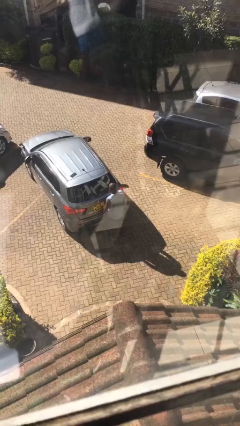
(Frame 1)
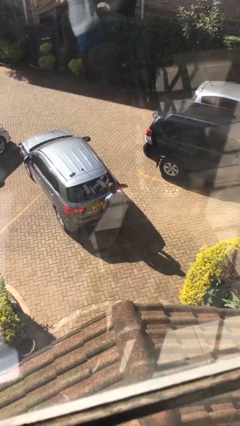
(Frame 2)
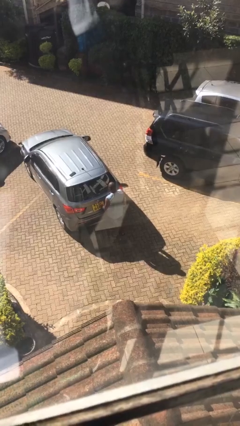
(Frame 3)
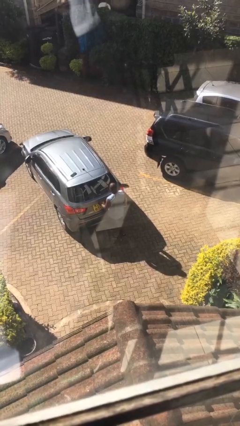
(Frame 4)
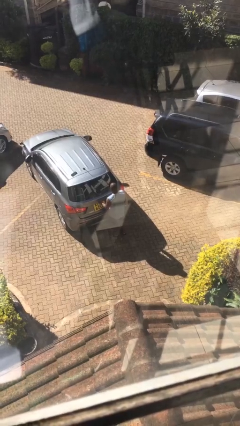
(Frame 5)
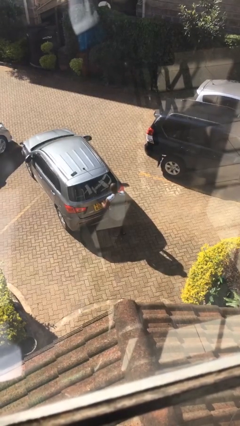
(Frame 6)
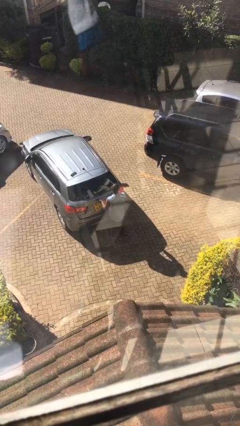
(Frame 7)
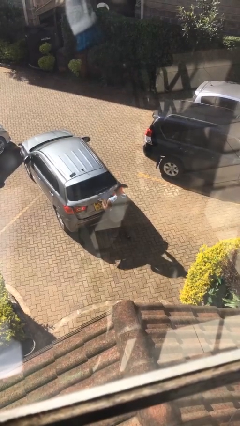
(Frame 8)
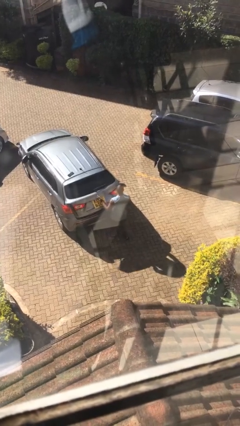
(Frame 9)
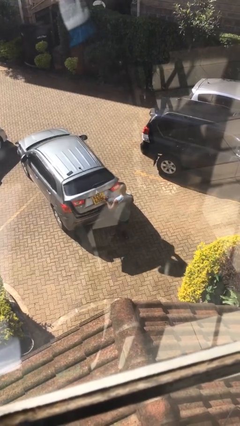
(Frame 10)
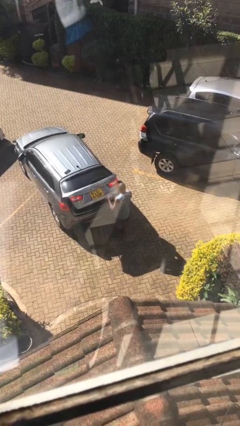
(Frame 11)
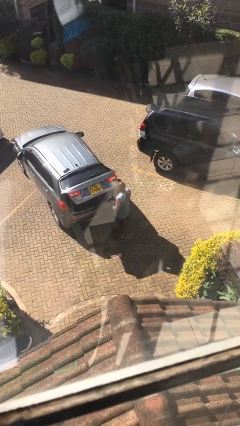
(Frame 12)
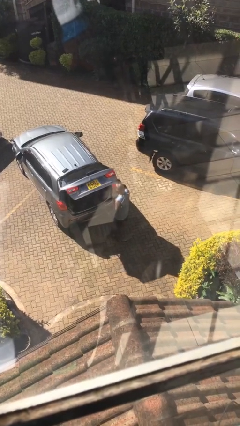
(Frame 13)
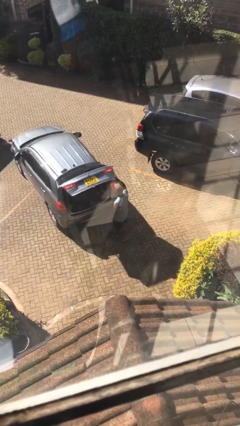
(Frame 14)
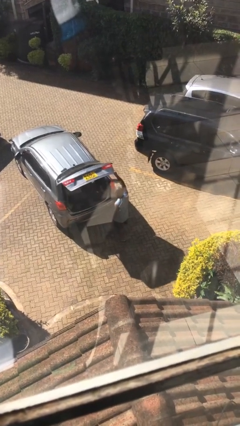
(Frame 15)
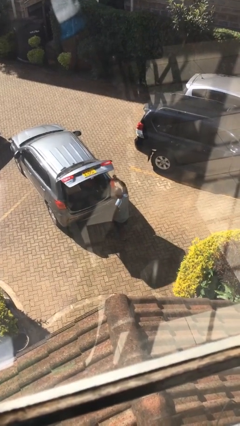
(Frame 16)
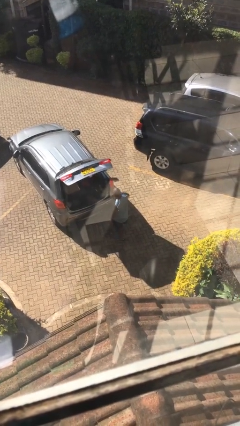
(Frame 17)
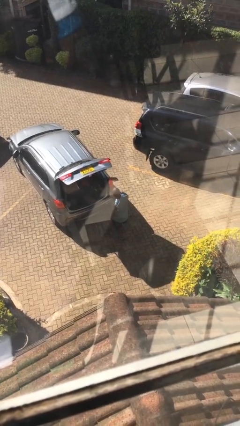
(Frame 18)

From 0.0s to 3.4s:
person opens car trunk

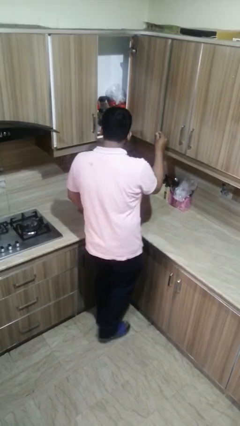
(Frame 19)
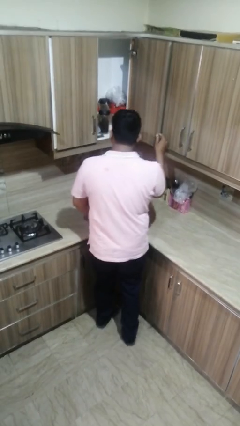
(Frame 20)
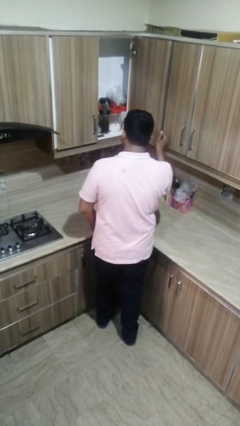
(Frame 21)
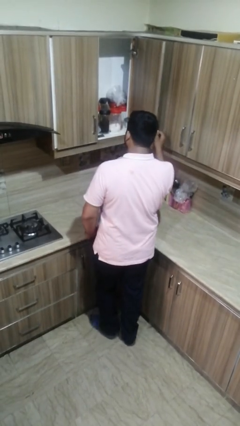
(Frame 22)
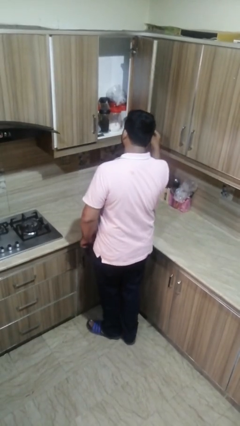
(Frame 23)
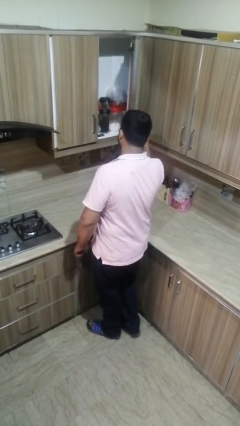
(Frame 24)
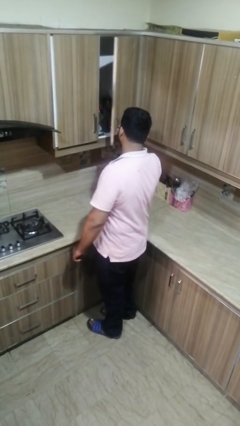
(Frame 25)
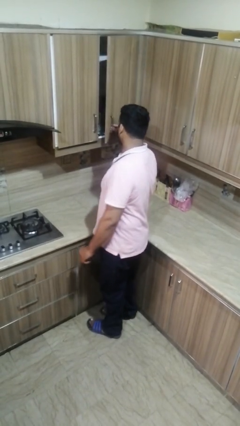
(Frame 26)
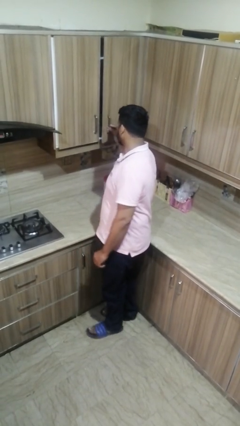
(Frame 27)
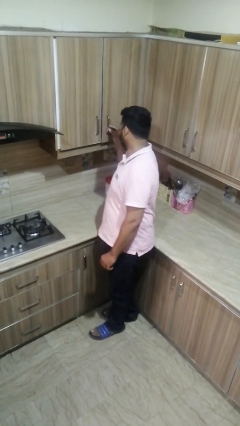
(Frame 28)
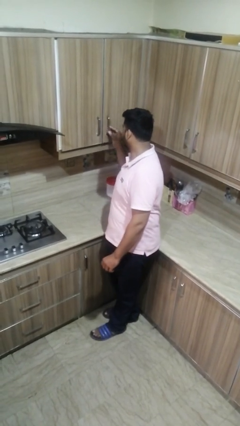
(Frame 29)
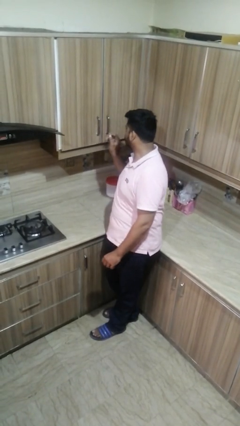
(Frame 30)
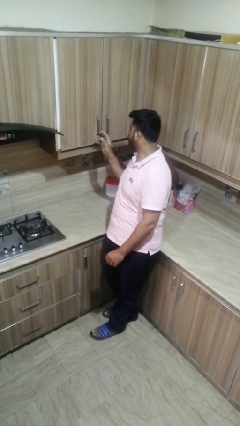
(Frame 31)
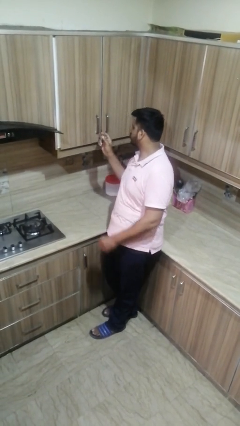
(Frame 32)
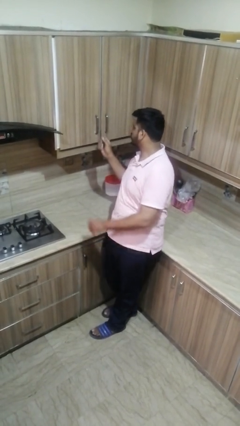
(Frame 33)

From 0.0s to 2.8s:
person closes cabinet

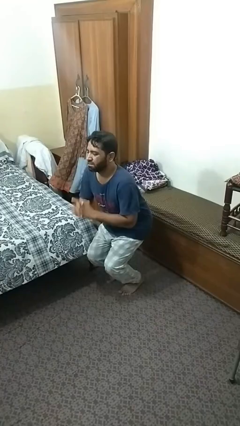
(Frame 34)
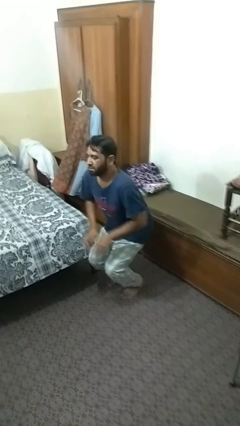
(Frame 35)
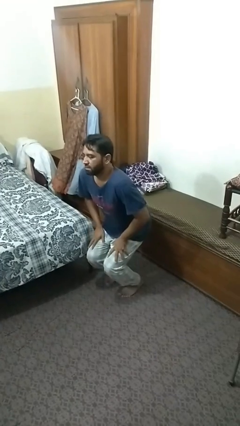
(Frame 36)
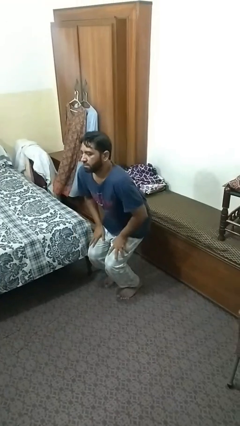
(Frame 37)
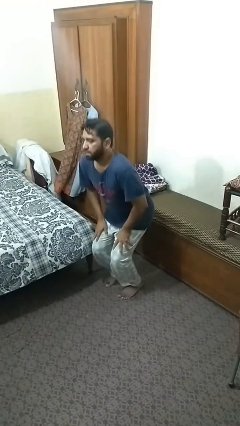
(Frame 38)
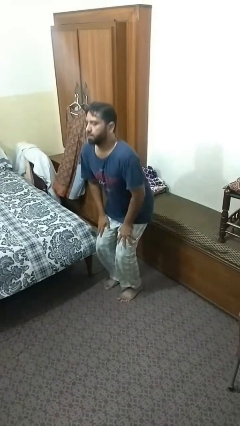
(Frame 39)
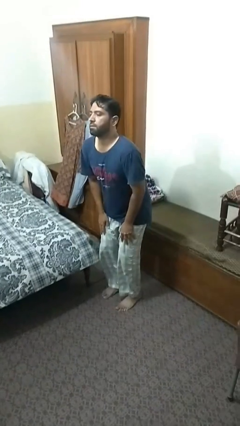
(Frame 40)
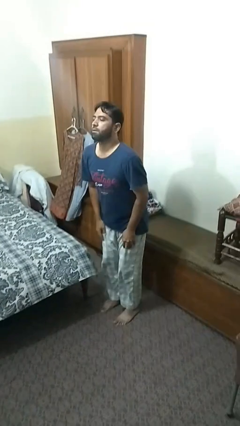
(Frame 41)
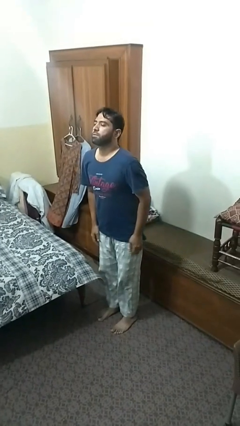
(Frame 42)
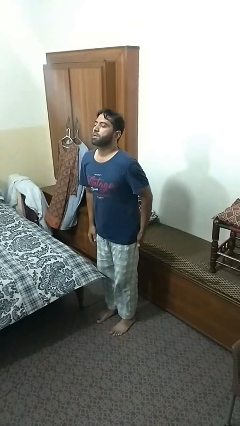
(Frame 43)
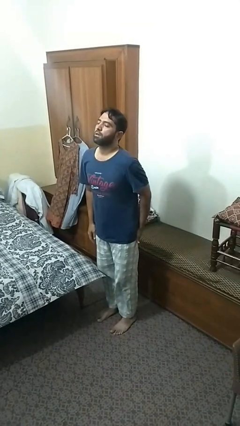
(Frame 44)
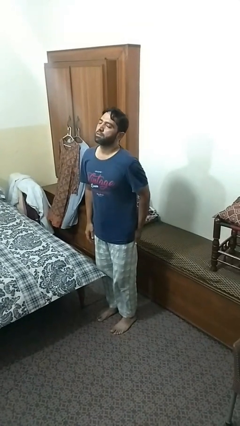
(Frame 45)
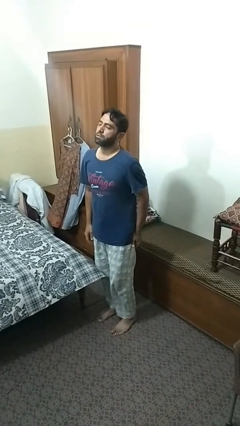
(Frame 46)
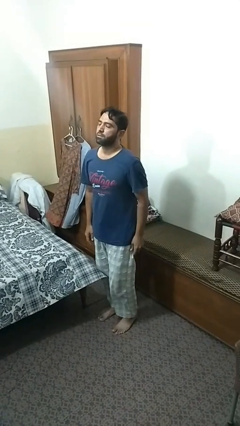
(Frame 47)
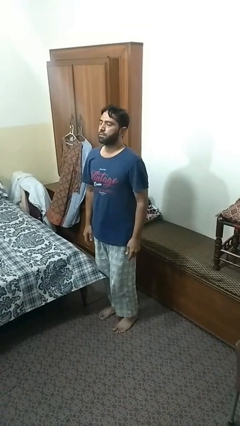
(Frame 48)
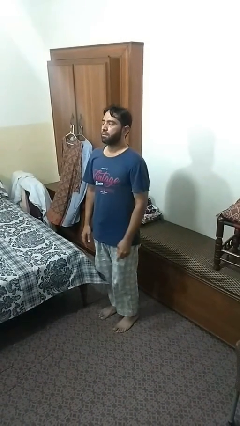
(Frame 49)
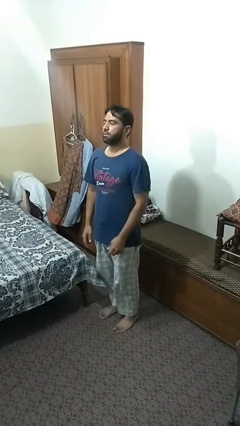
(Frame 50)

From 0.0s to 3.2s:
person stands up

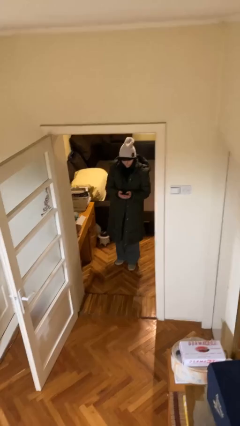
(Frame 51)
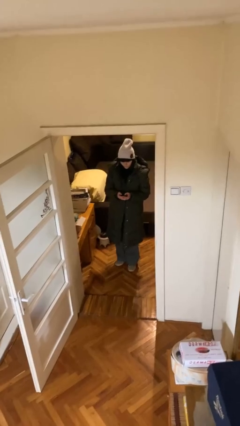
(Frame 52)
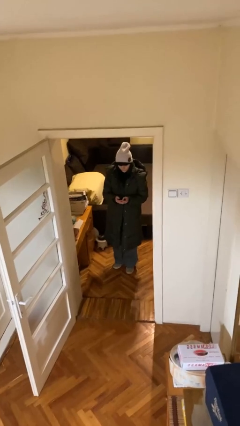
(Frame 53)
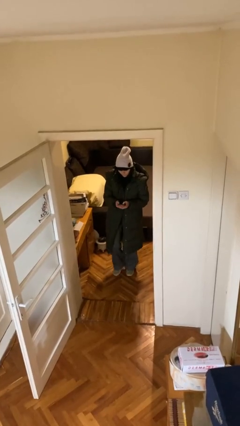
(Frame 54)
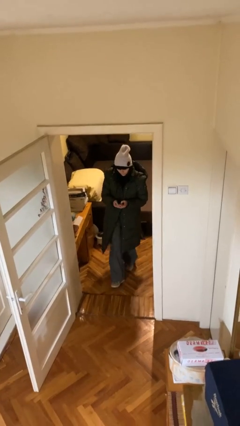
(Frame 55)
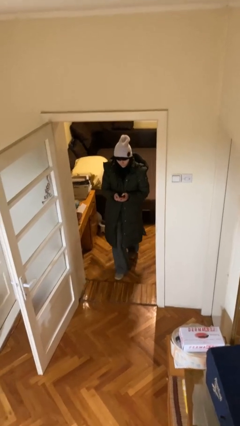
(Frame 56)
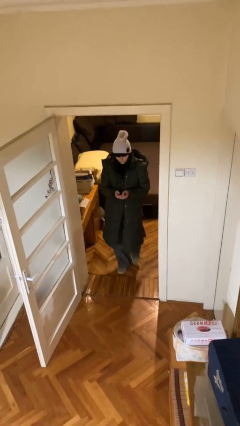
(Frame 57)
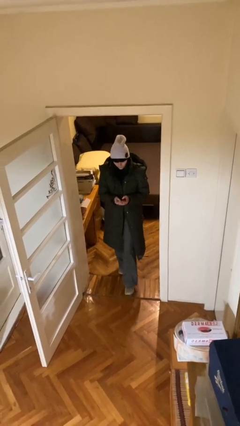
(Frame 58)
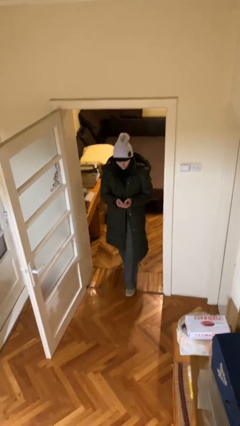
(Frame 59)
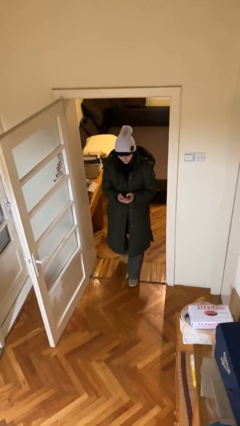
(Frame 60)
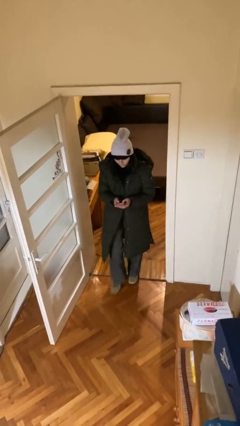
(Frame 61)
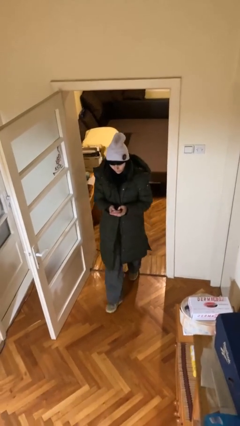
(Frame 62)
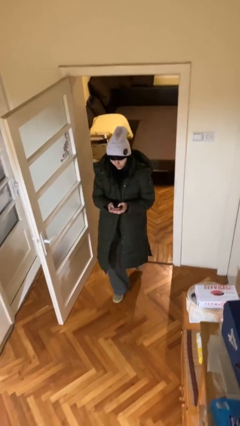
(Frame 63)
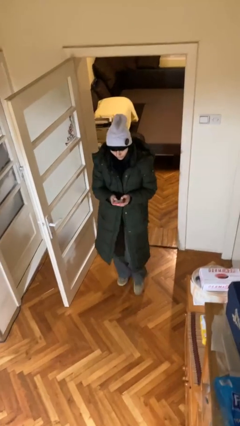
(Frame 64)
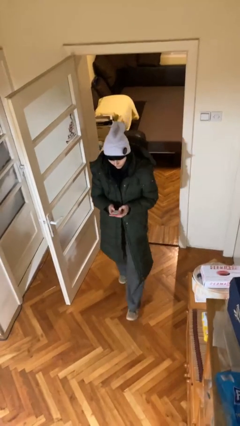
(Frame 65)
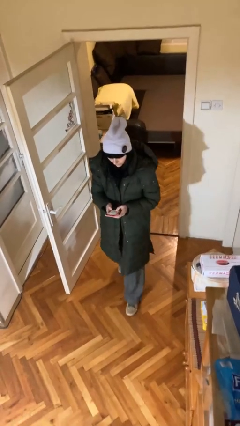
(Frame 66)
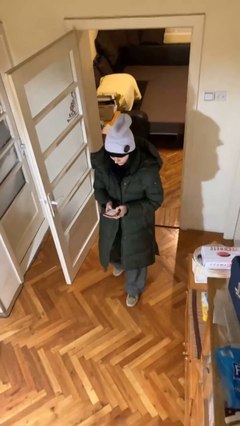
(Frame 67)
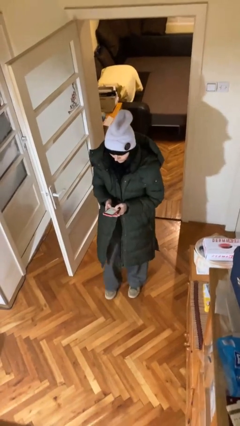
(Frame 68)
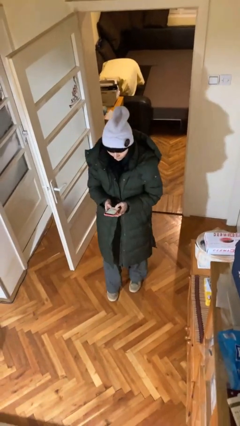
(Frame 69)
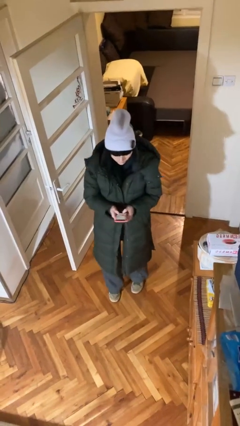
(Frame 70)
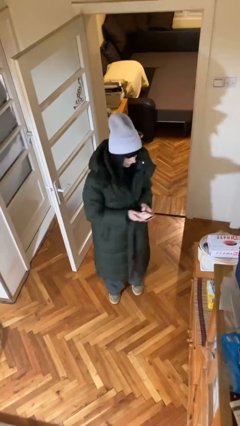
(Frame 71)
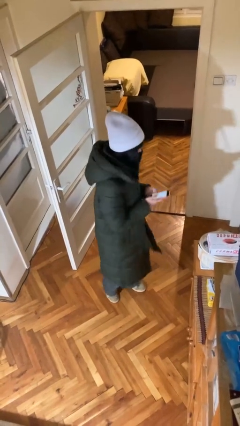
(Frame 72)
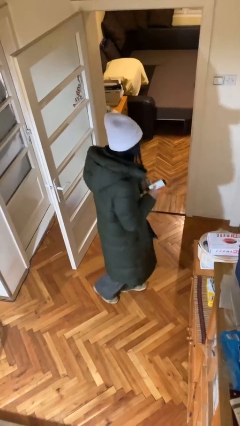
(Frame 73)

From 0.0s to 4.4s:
person enters scene through structure

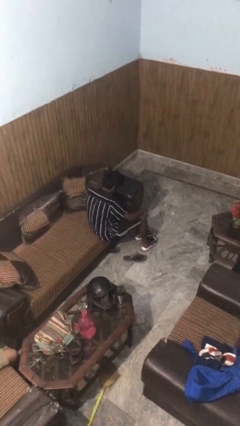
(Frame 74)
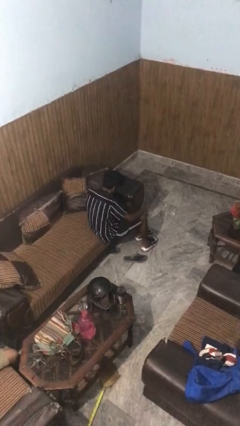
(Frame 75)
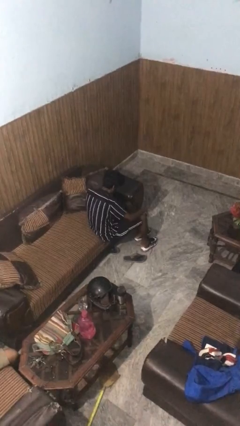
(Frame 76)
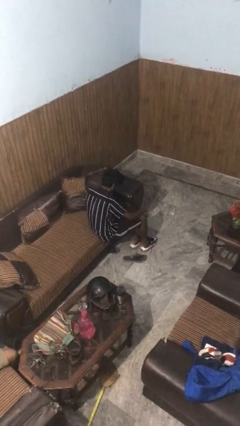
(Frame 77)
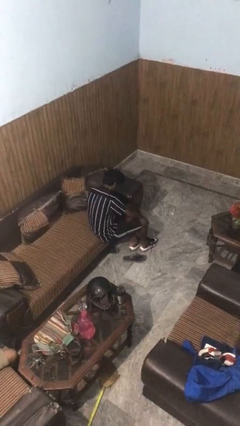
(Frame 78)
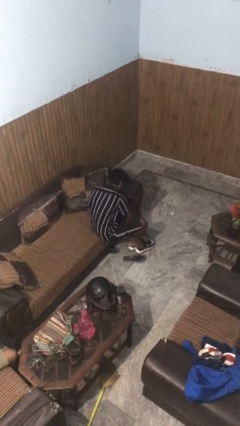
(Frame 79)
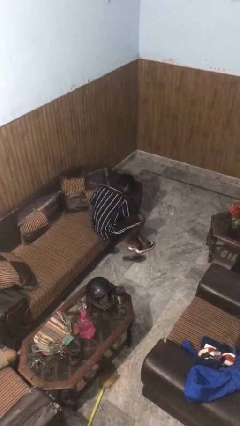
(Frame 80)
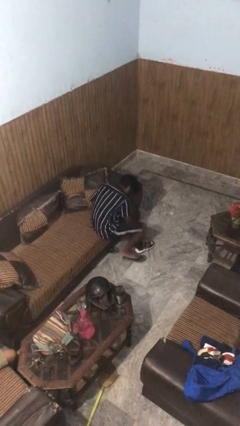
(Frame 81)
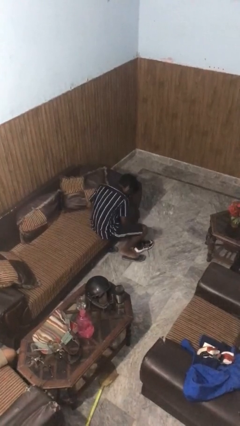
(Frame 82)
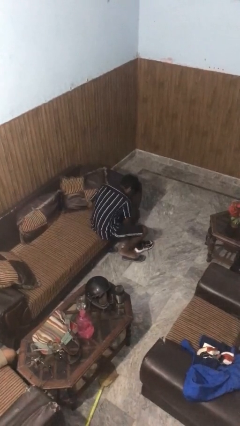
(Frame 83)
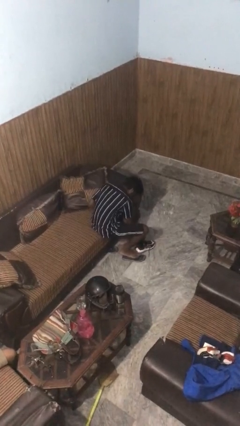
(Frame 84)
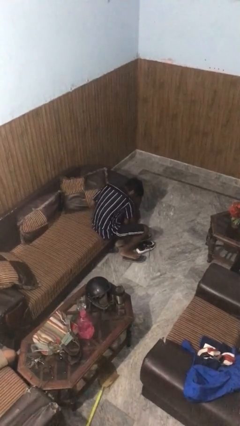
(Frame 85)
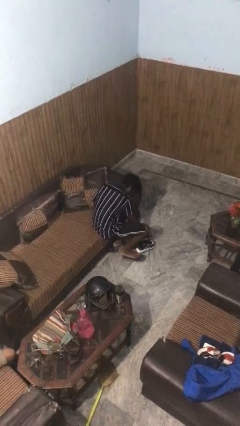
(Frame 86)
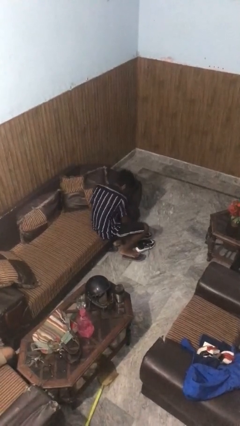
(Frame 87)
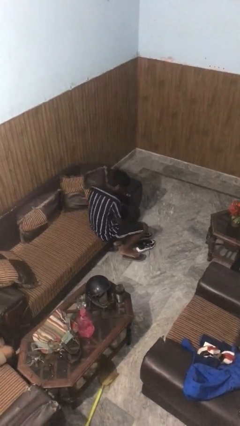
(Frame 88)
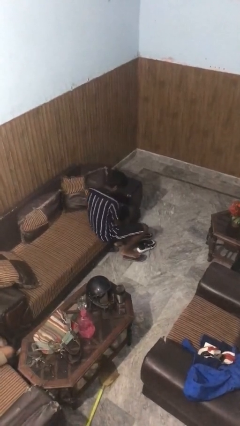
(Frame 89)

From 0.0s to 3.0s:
person takes off shoes

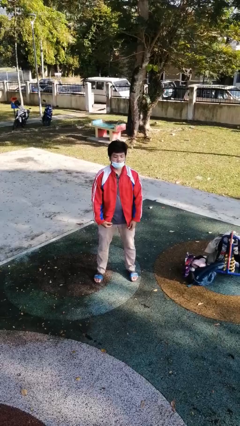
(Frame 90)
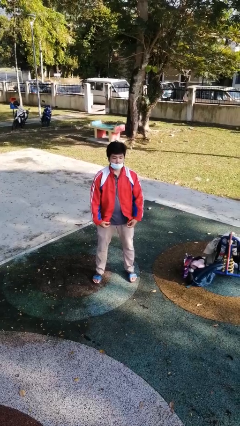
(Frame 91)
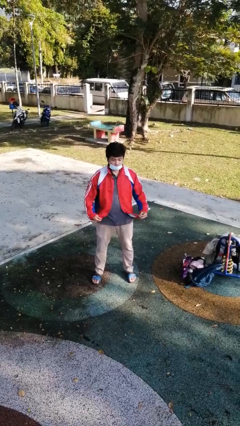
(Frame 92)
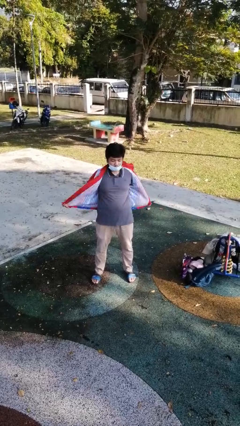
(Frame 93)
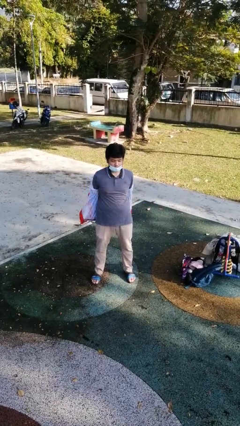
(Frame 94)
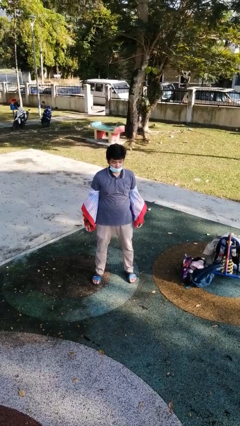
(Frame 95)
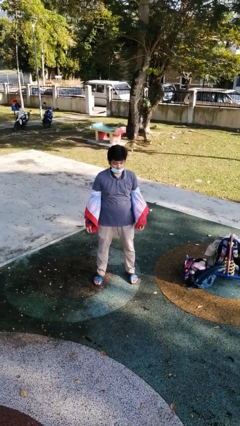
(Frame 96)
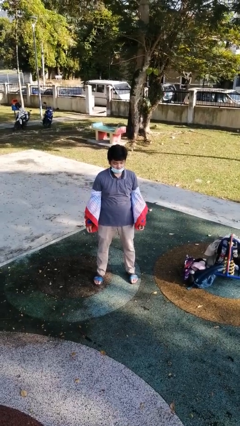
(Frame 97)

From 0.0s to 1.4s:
person takes off jacket
